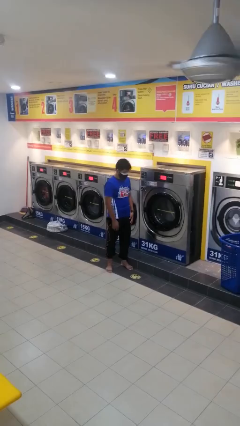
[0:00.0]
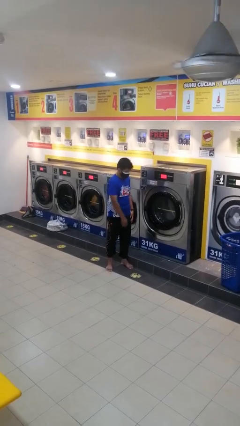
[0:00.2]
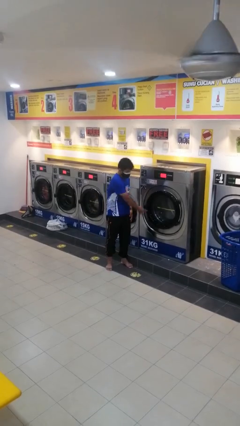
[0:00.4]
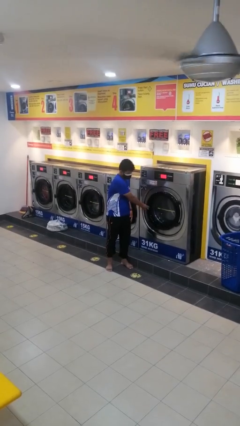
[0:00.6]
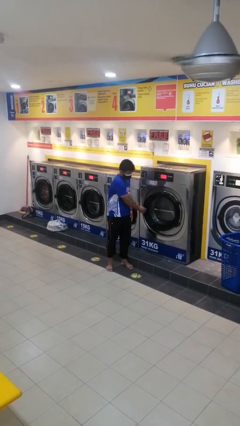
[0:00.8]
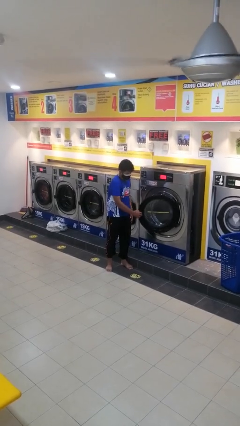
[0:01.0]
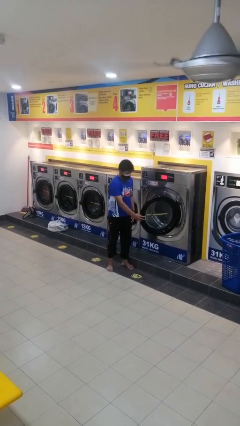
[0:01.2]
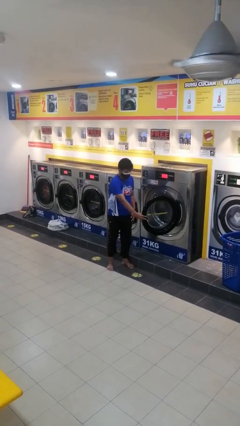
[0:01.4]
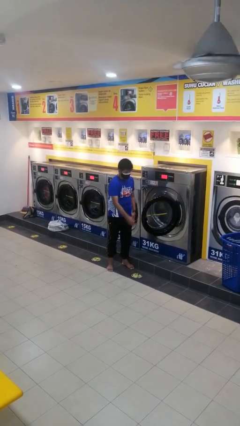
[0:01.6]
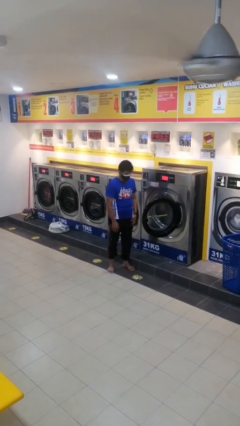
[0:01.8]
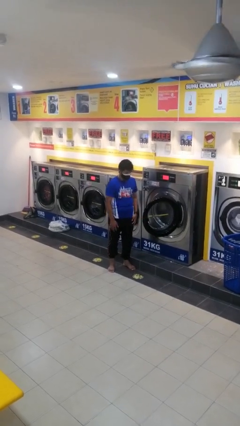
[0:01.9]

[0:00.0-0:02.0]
person opens clothes washer

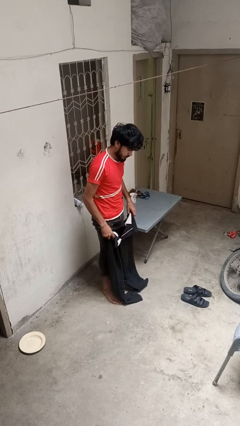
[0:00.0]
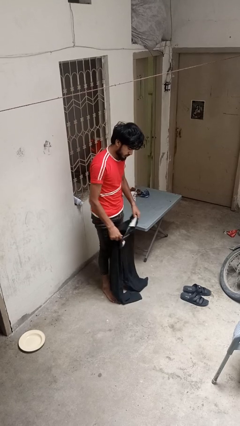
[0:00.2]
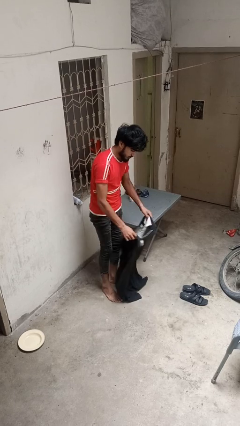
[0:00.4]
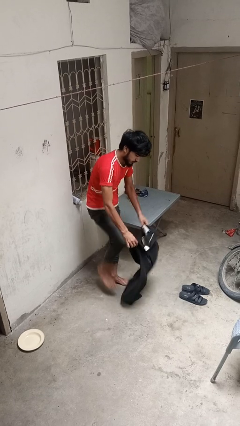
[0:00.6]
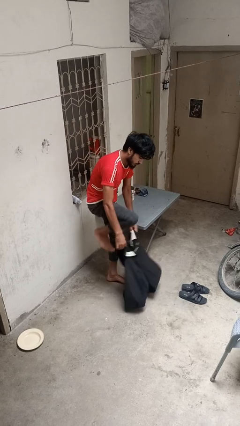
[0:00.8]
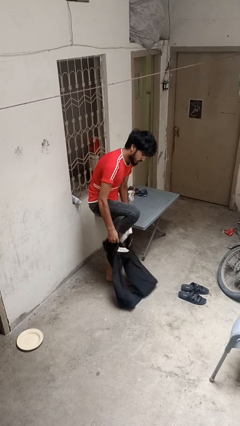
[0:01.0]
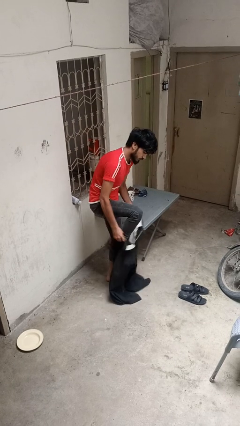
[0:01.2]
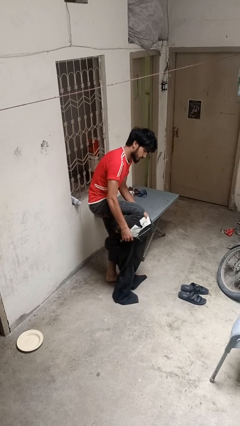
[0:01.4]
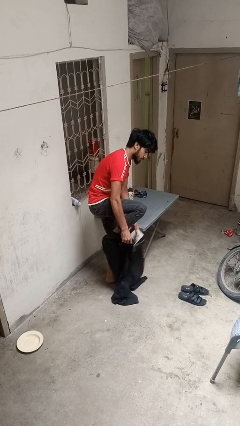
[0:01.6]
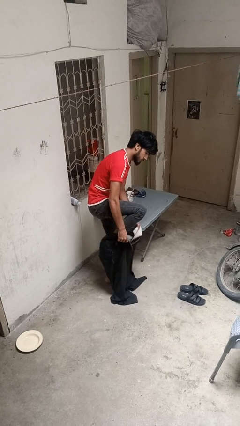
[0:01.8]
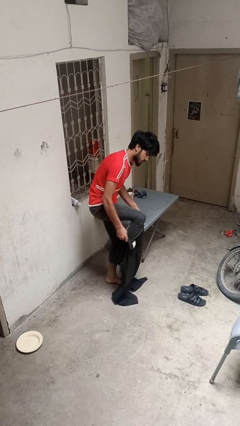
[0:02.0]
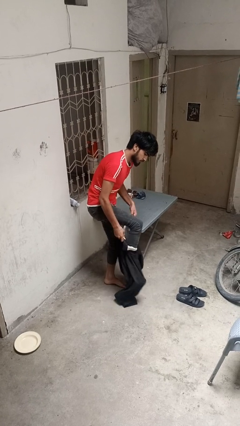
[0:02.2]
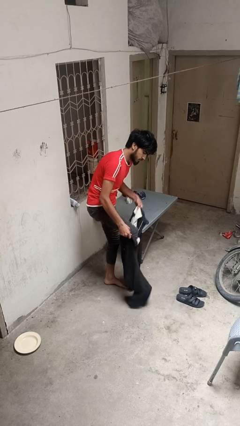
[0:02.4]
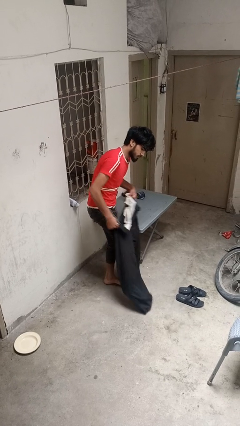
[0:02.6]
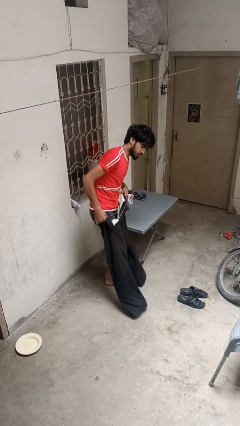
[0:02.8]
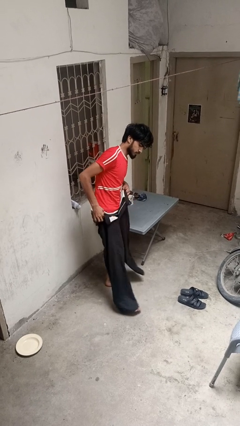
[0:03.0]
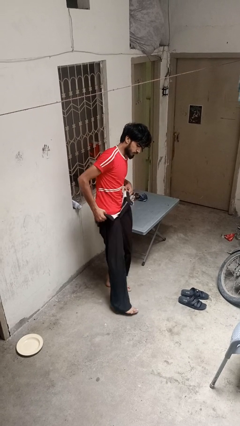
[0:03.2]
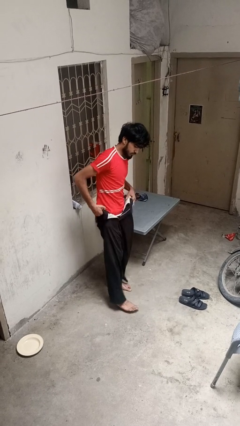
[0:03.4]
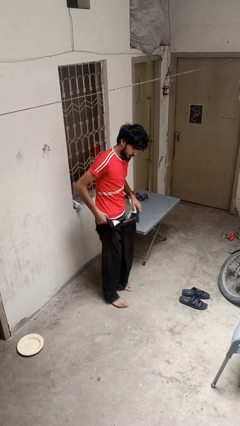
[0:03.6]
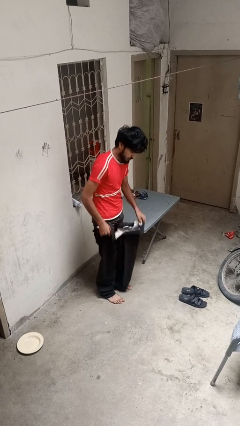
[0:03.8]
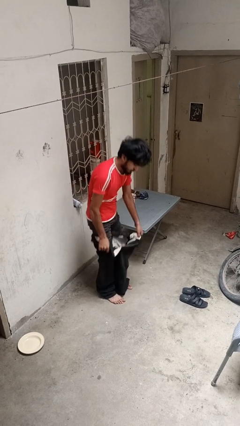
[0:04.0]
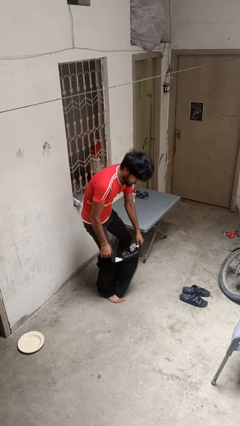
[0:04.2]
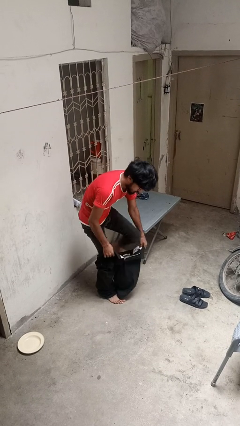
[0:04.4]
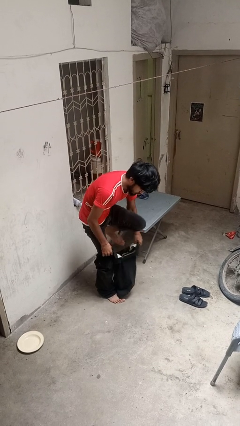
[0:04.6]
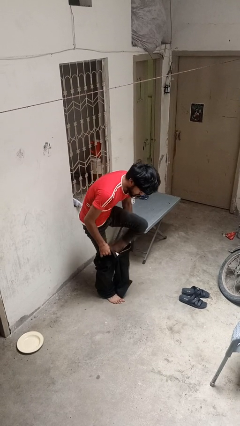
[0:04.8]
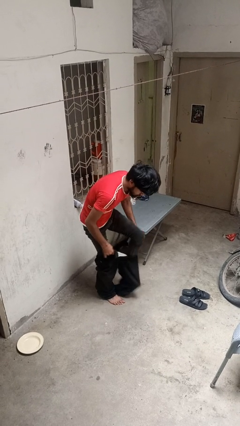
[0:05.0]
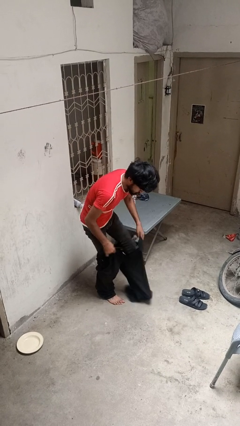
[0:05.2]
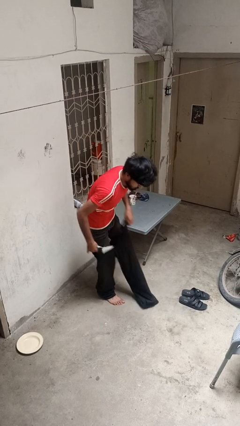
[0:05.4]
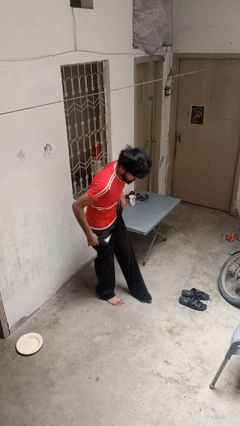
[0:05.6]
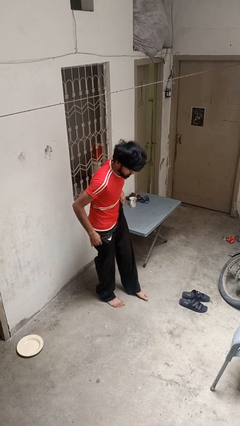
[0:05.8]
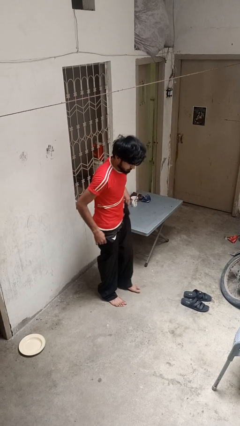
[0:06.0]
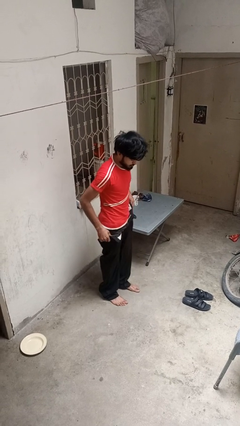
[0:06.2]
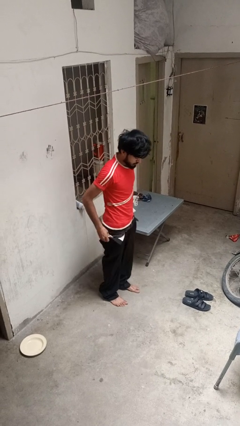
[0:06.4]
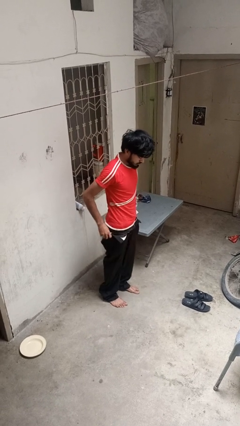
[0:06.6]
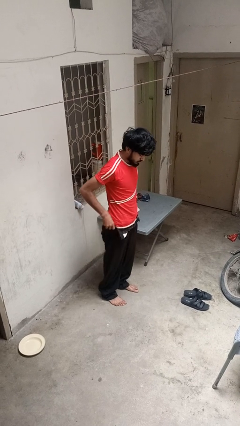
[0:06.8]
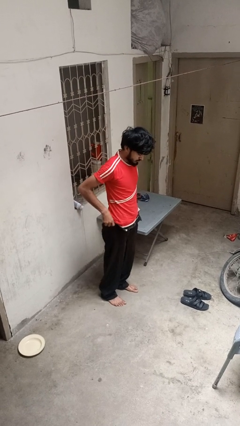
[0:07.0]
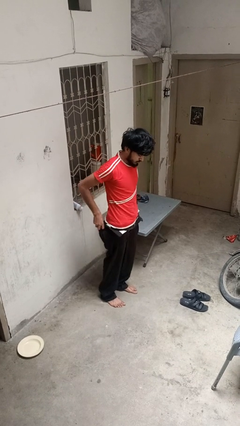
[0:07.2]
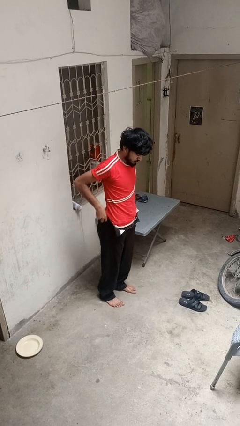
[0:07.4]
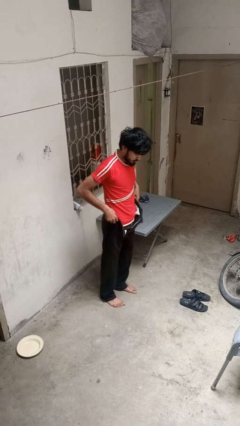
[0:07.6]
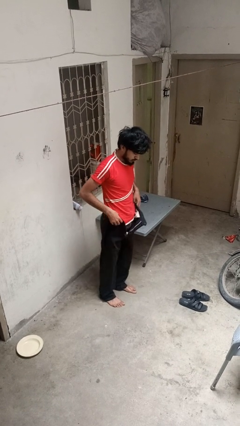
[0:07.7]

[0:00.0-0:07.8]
person puts on pants

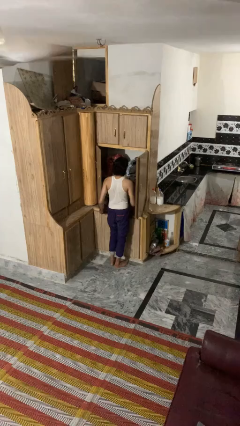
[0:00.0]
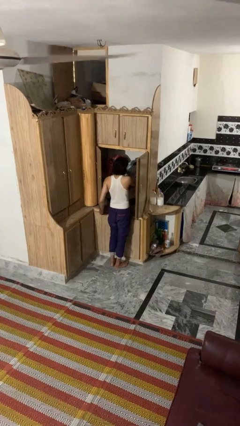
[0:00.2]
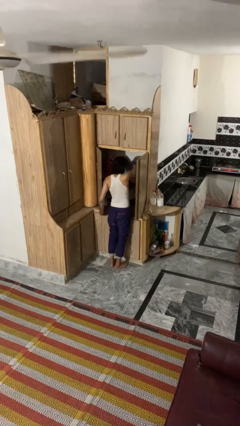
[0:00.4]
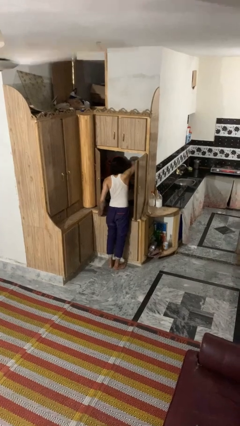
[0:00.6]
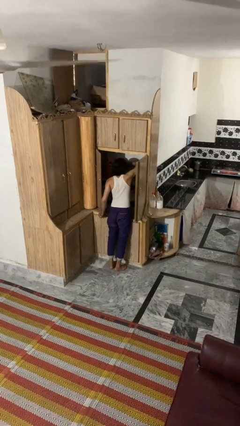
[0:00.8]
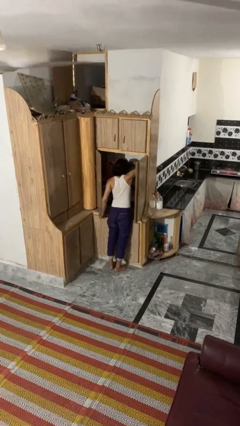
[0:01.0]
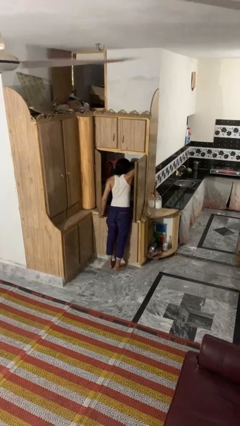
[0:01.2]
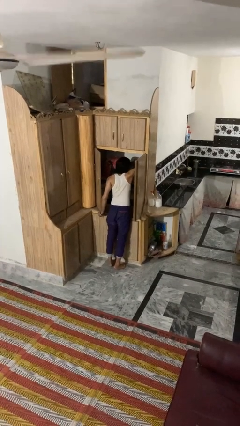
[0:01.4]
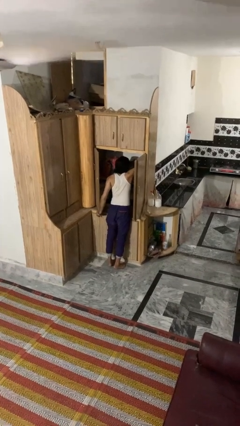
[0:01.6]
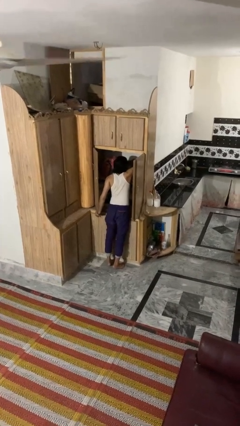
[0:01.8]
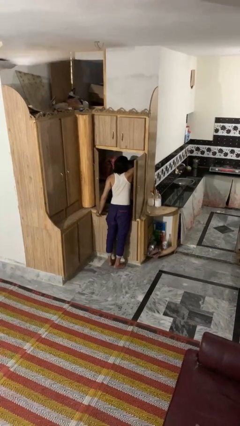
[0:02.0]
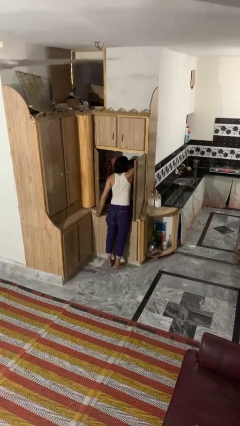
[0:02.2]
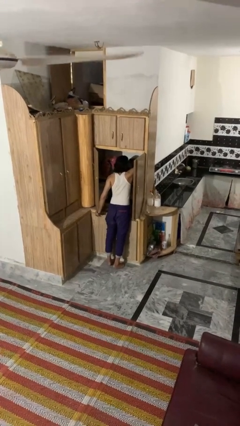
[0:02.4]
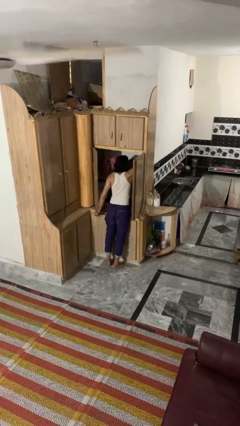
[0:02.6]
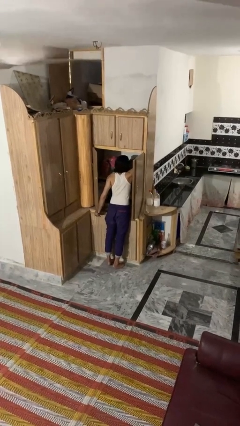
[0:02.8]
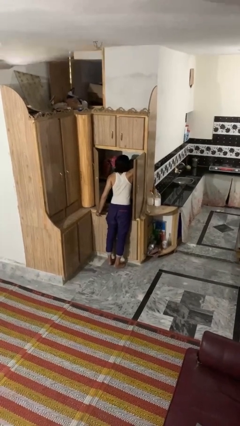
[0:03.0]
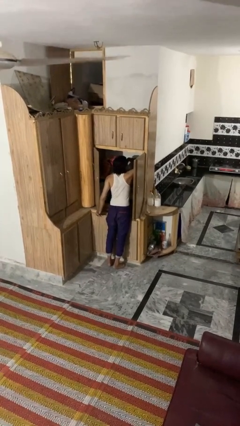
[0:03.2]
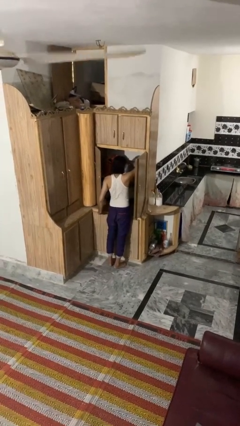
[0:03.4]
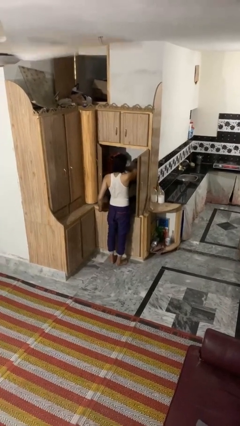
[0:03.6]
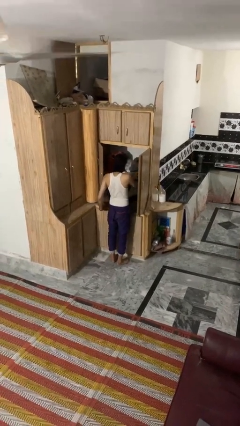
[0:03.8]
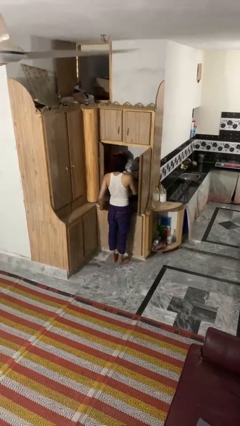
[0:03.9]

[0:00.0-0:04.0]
person searches in cabinet

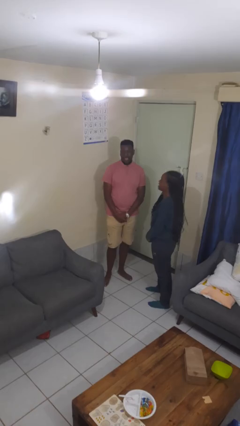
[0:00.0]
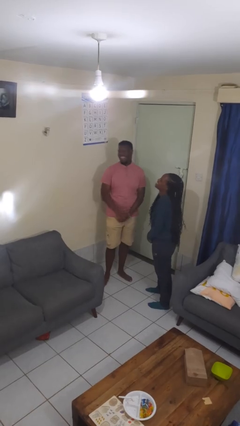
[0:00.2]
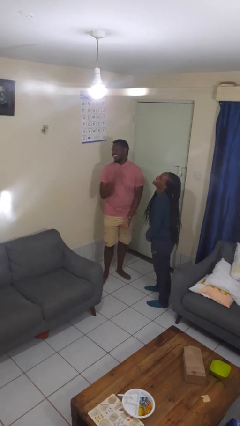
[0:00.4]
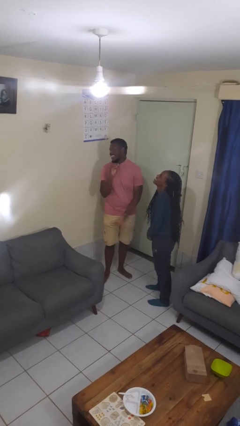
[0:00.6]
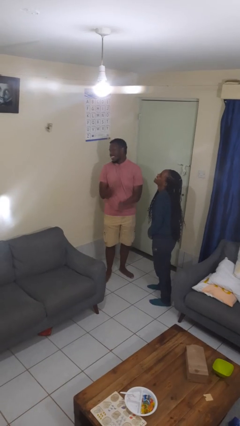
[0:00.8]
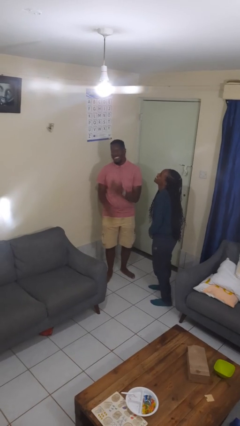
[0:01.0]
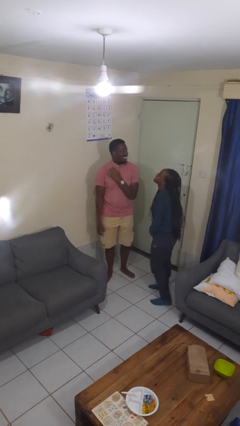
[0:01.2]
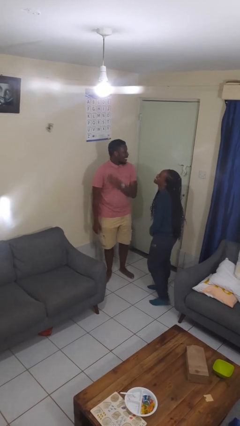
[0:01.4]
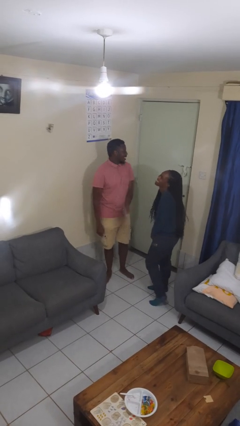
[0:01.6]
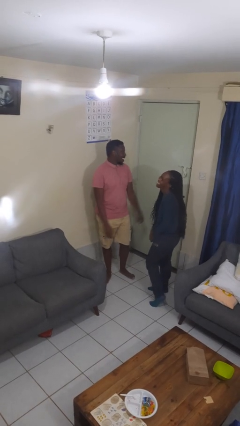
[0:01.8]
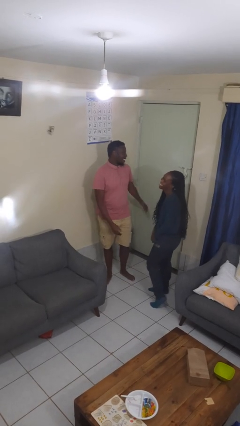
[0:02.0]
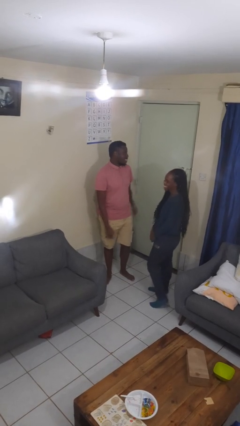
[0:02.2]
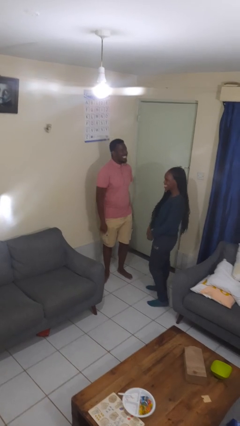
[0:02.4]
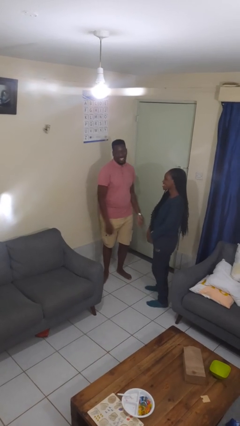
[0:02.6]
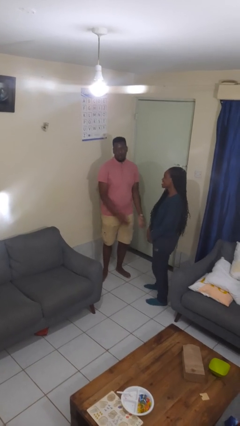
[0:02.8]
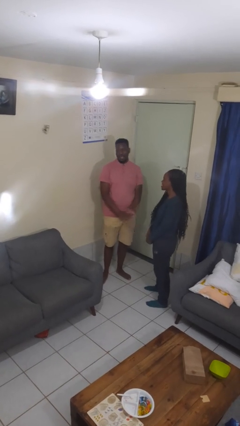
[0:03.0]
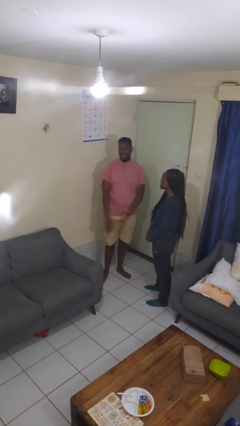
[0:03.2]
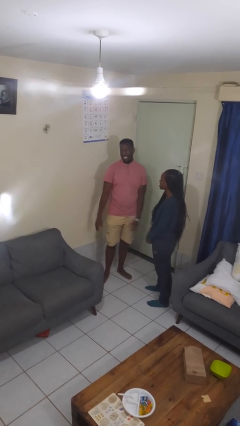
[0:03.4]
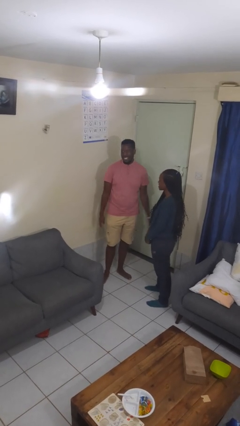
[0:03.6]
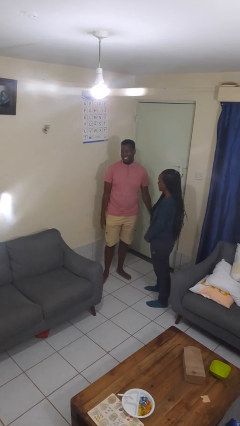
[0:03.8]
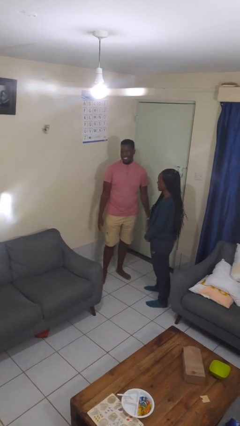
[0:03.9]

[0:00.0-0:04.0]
person laughs with person
